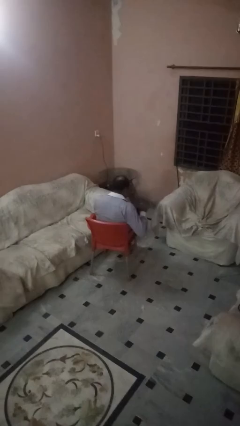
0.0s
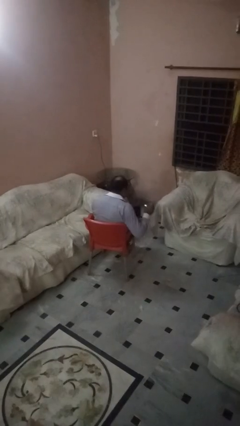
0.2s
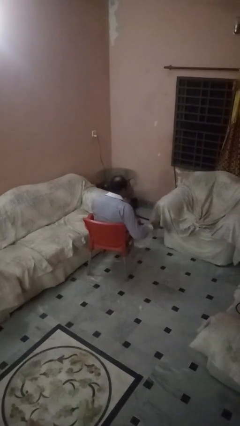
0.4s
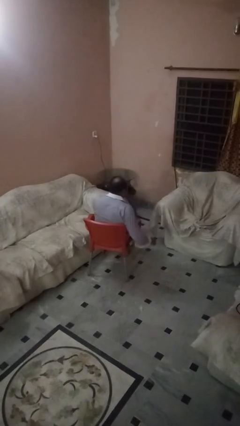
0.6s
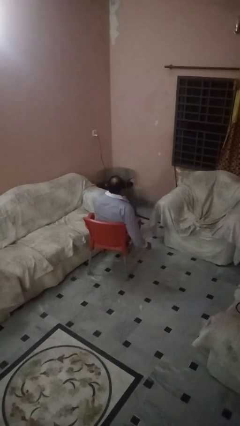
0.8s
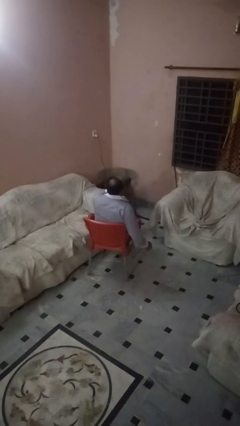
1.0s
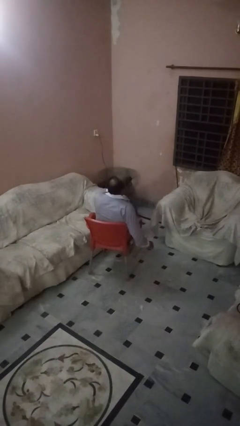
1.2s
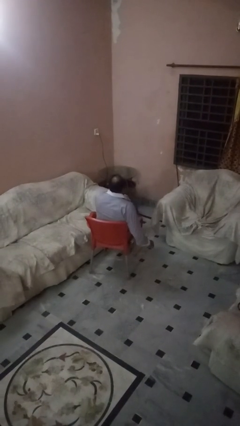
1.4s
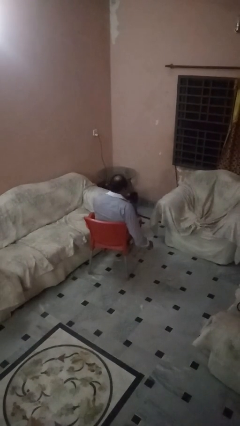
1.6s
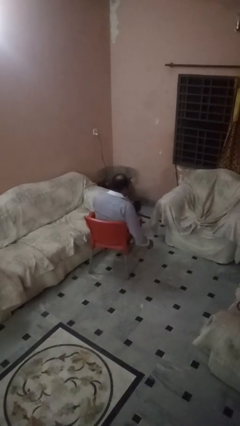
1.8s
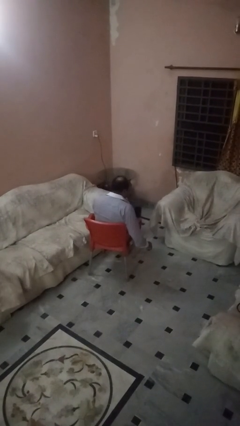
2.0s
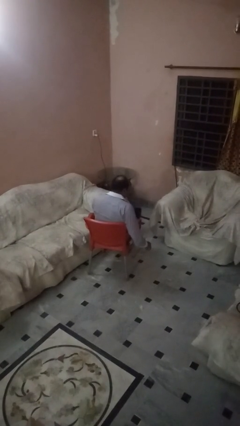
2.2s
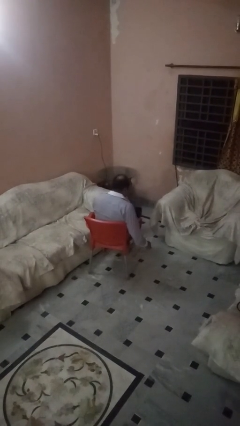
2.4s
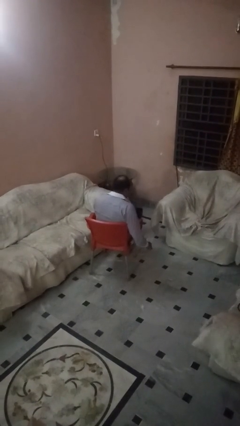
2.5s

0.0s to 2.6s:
person drinks from mug

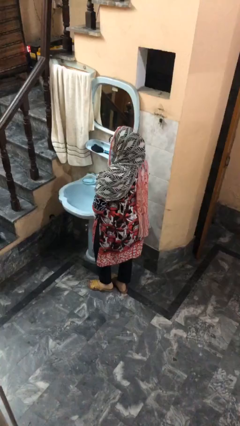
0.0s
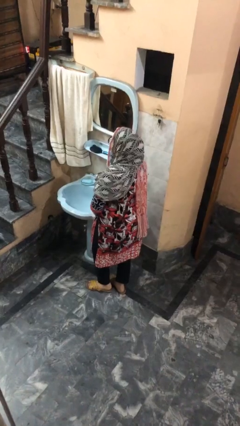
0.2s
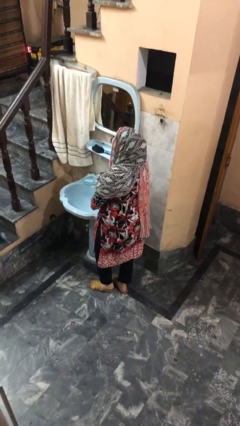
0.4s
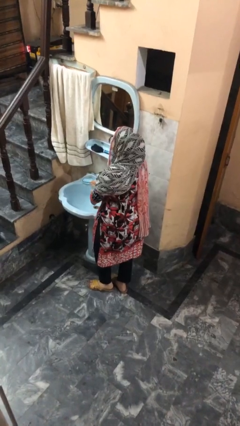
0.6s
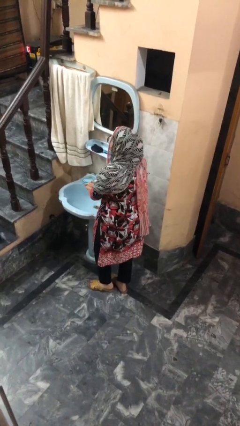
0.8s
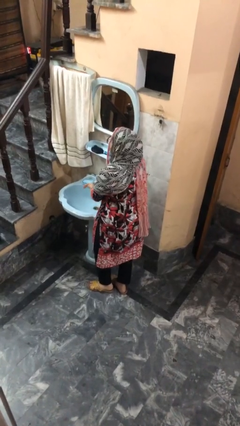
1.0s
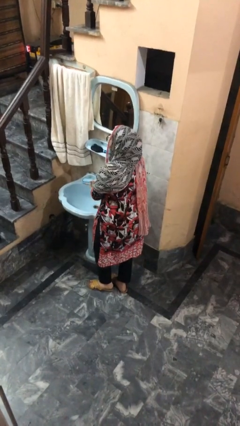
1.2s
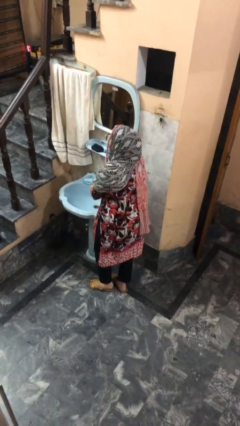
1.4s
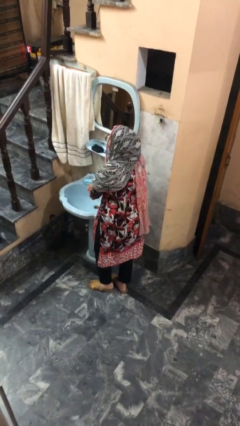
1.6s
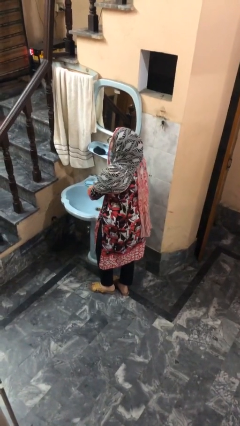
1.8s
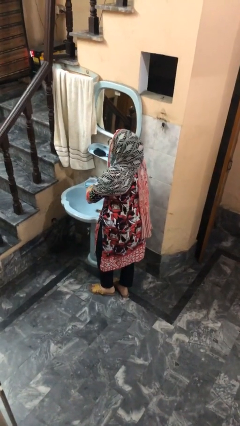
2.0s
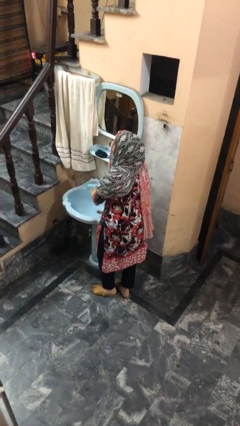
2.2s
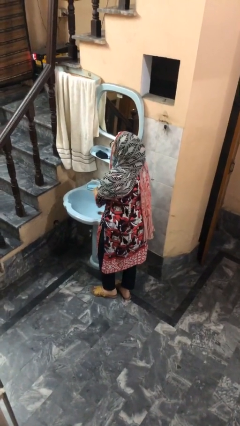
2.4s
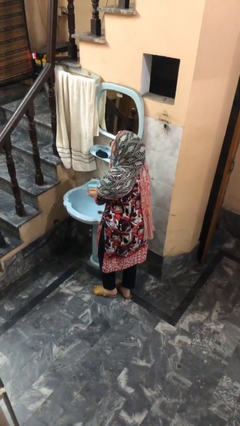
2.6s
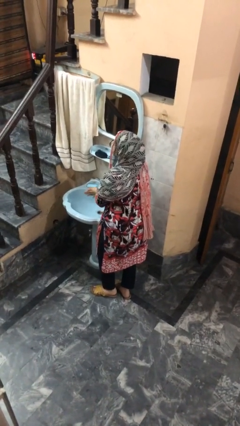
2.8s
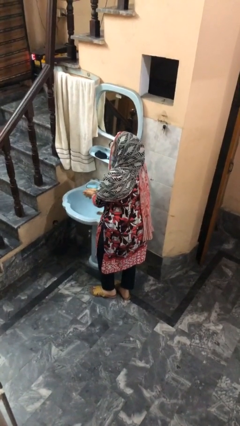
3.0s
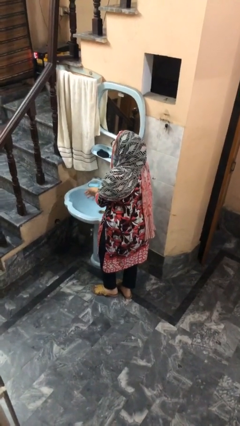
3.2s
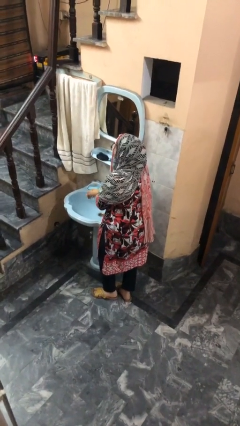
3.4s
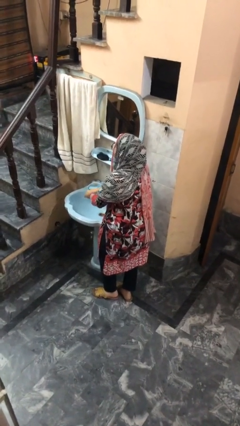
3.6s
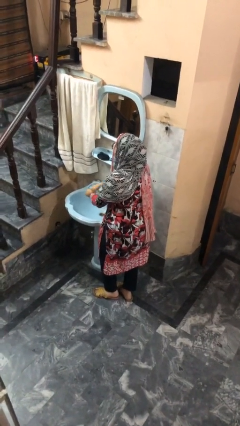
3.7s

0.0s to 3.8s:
person washes face

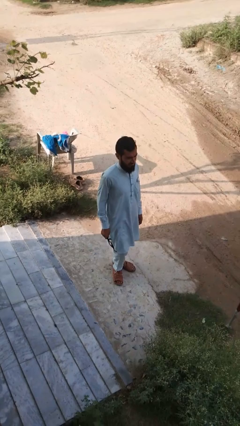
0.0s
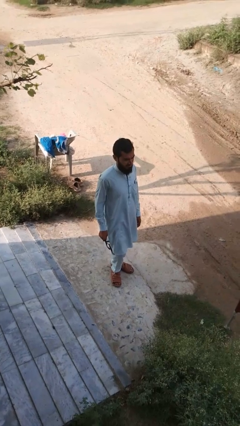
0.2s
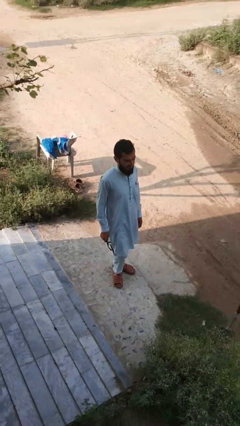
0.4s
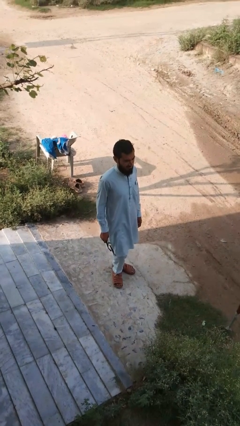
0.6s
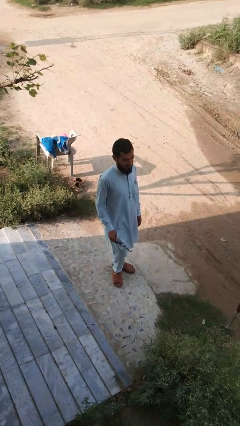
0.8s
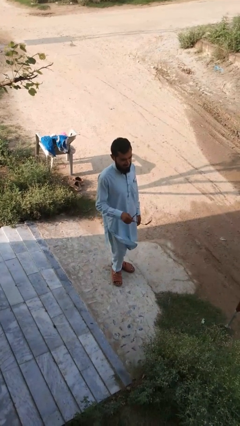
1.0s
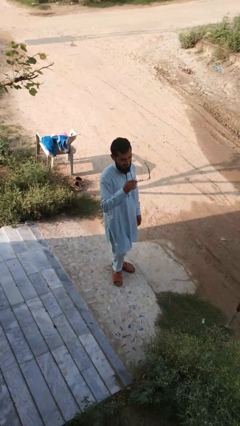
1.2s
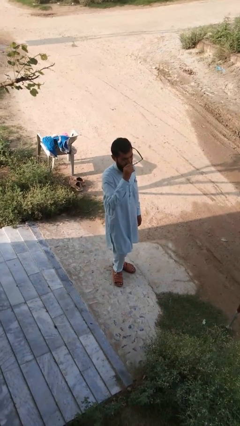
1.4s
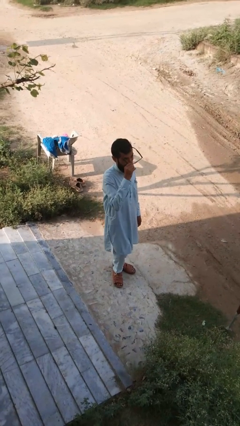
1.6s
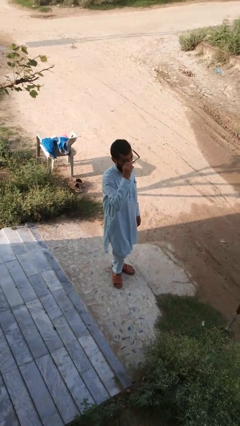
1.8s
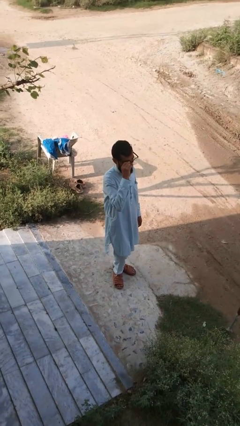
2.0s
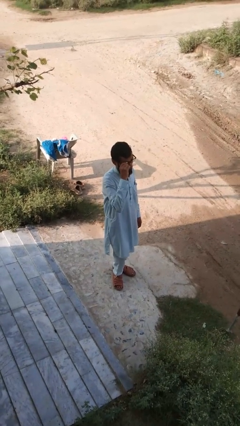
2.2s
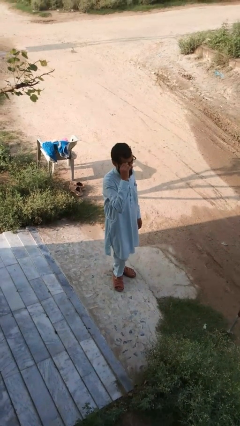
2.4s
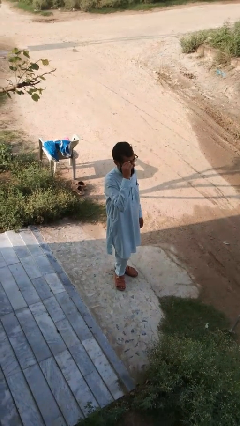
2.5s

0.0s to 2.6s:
person puts on glasses

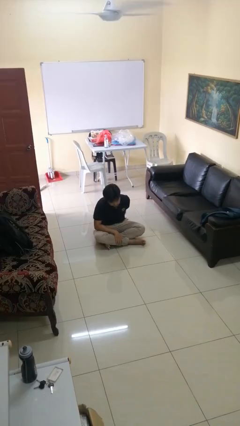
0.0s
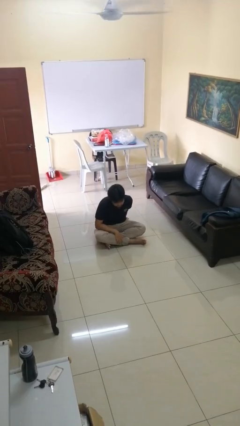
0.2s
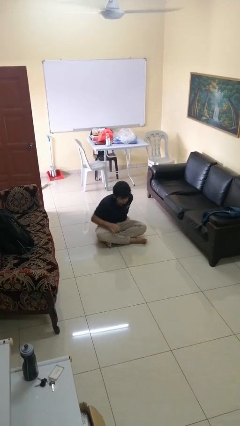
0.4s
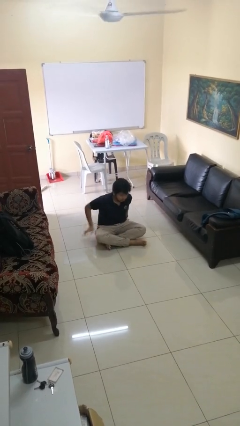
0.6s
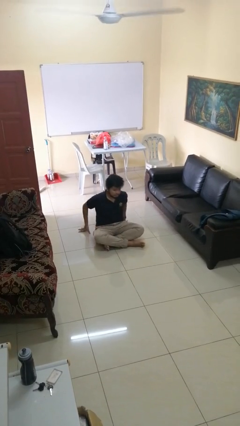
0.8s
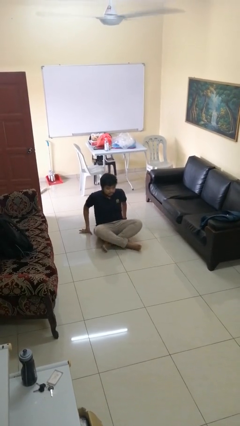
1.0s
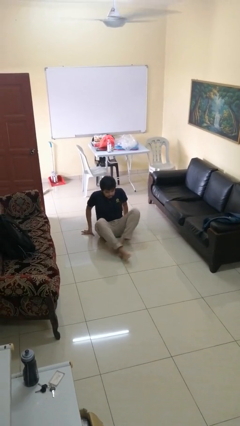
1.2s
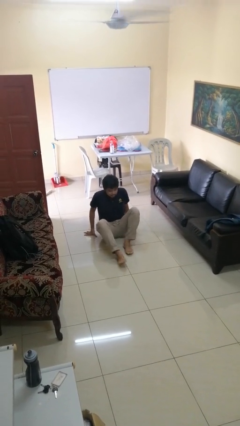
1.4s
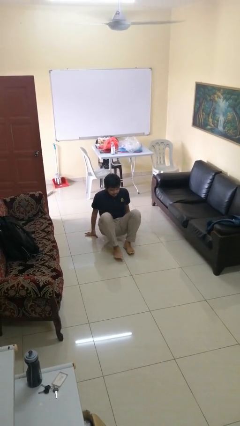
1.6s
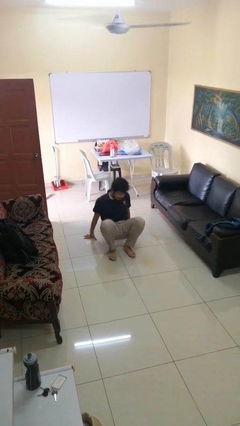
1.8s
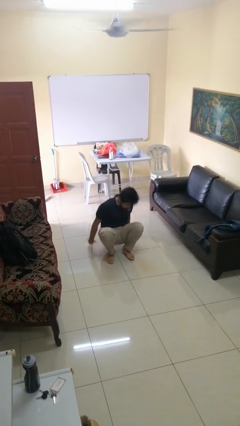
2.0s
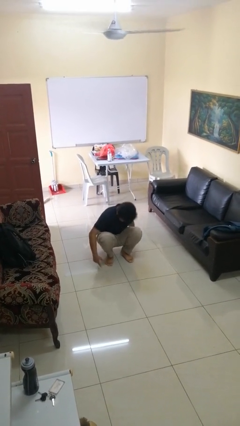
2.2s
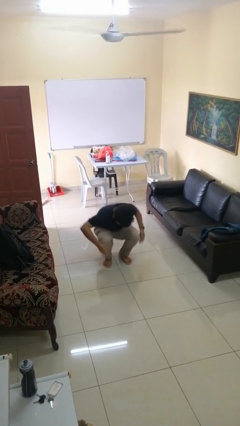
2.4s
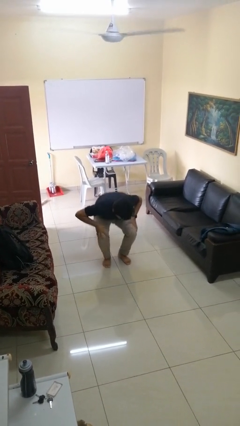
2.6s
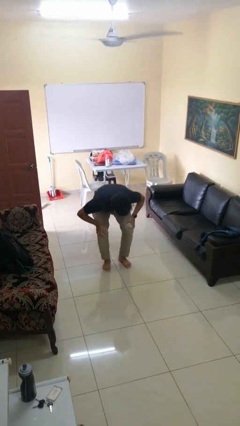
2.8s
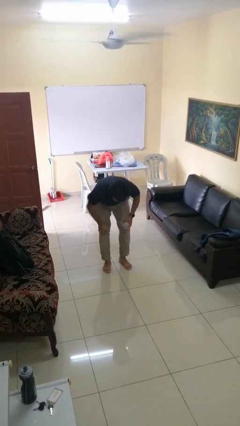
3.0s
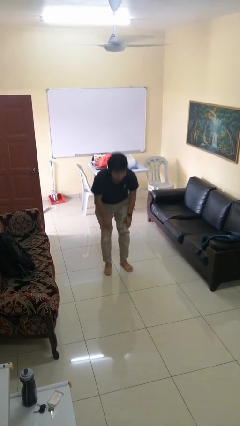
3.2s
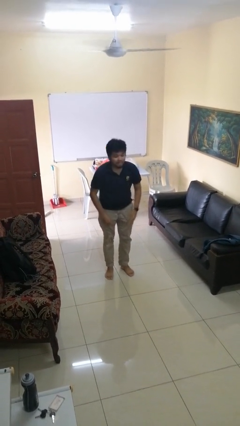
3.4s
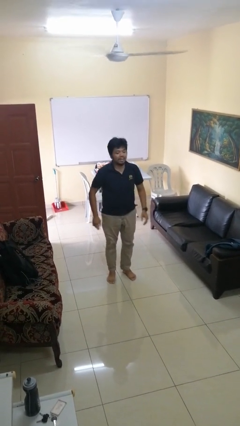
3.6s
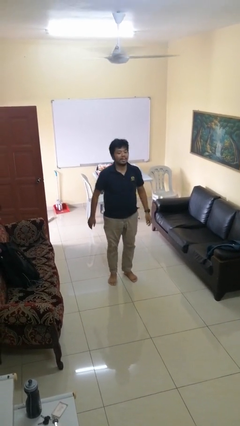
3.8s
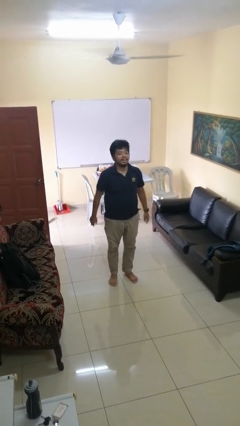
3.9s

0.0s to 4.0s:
person stands up from floor

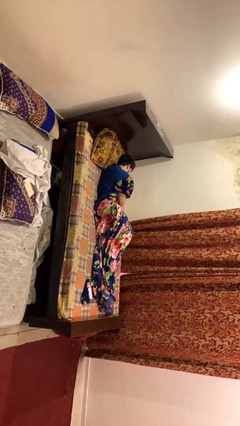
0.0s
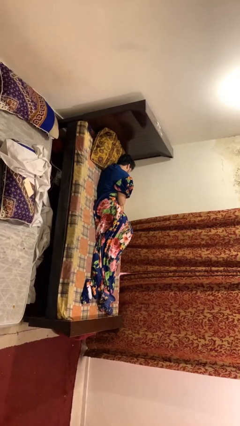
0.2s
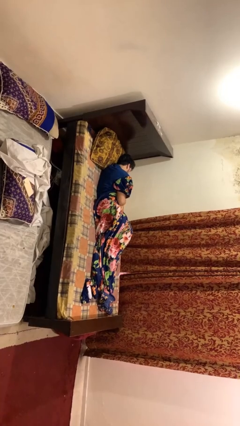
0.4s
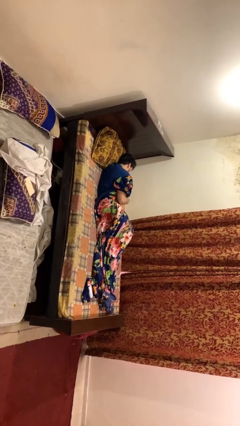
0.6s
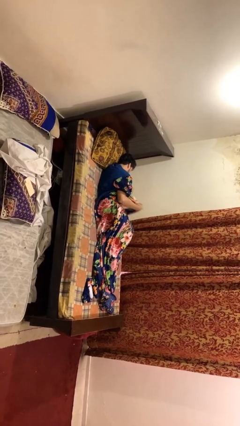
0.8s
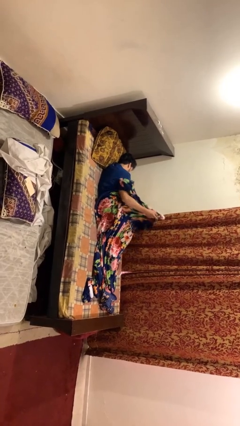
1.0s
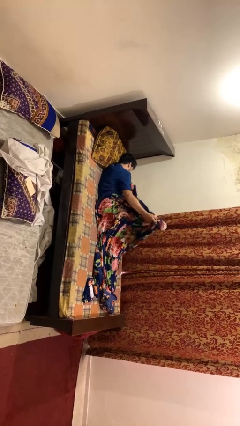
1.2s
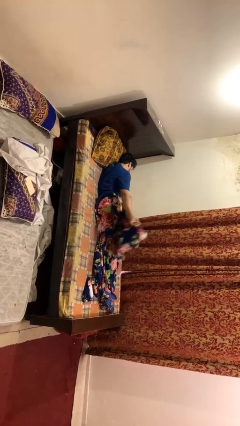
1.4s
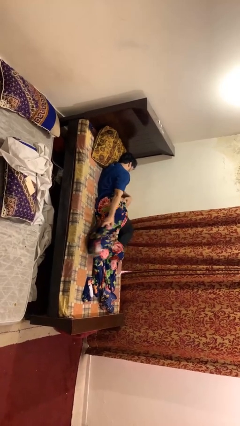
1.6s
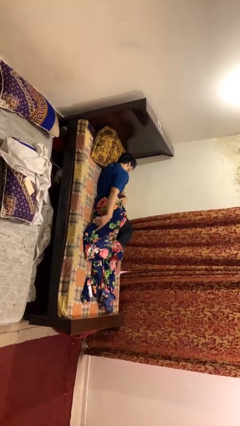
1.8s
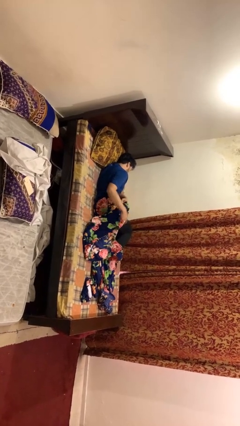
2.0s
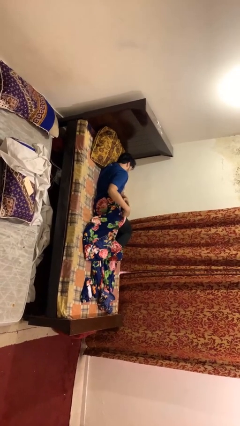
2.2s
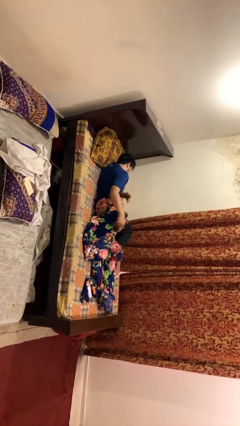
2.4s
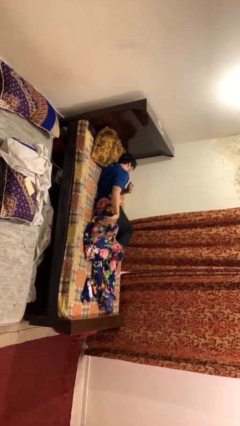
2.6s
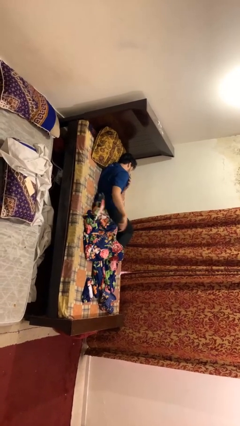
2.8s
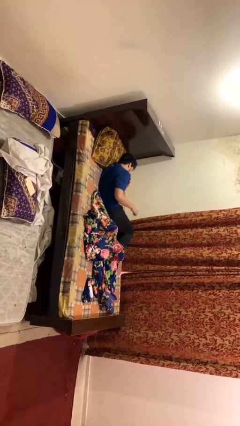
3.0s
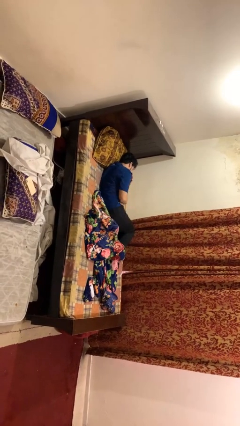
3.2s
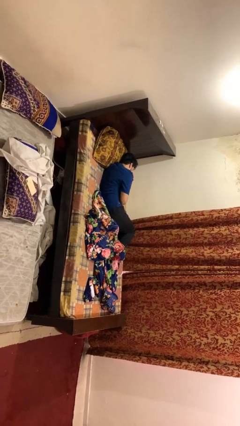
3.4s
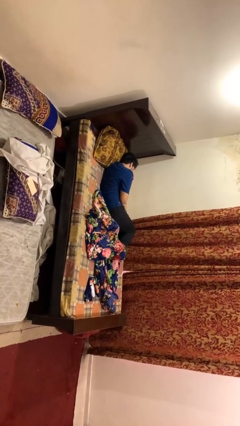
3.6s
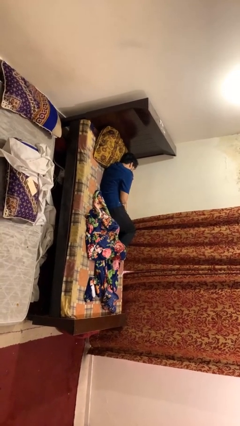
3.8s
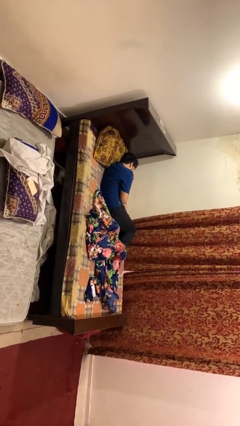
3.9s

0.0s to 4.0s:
person uncovers with blanket

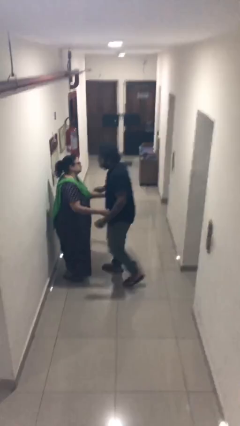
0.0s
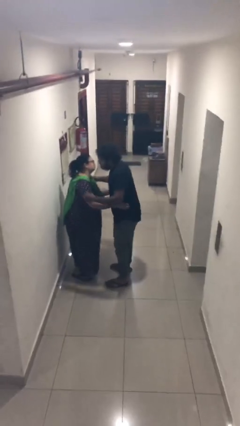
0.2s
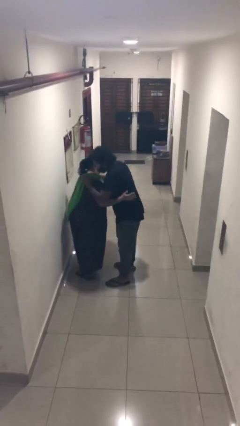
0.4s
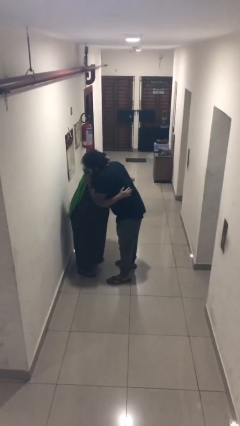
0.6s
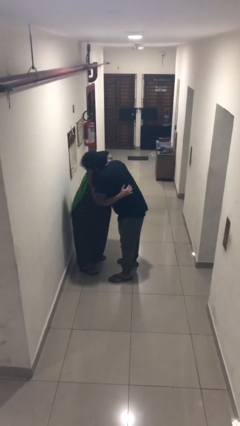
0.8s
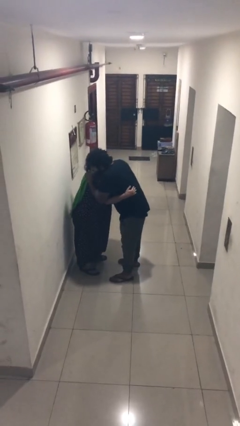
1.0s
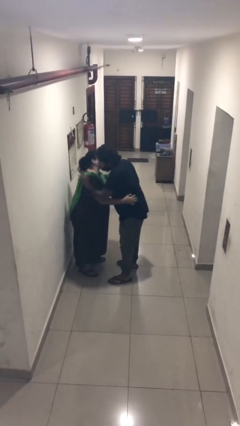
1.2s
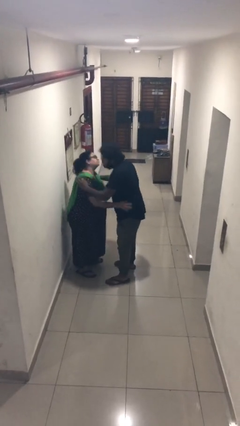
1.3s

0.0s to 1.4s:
person embraces person
